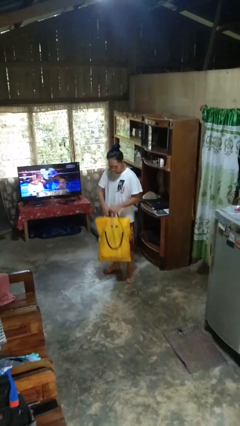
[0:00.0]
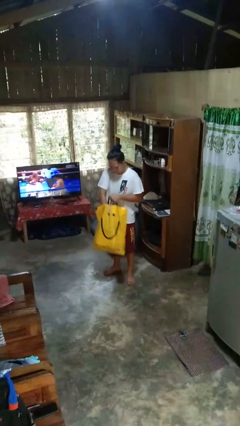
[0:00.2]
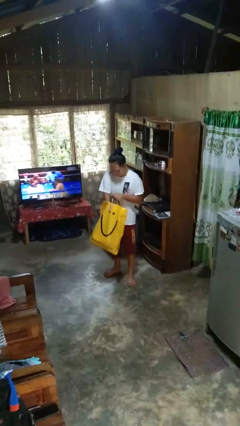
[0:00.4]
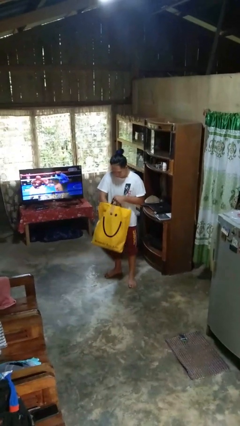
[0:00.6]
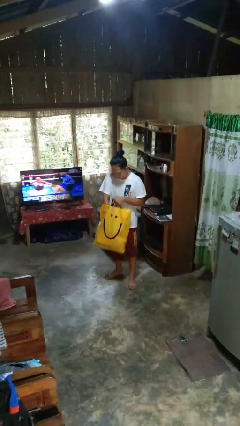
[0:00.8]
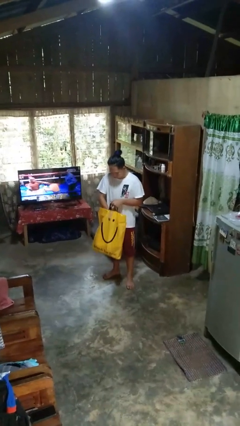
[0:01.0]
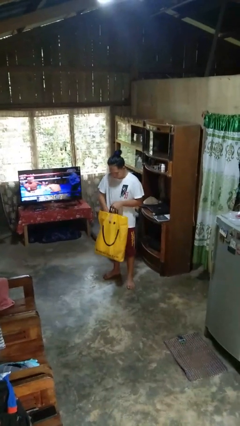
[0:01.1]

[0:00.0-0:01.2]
person searches in bag

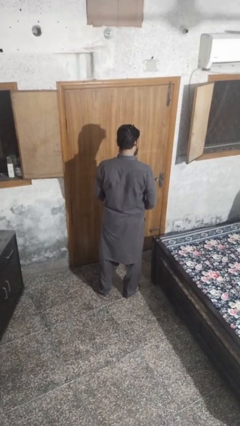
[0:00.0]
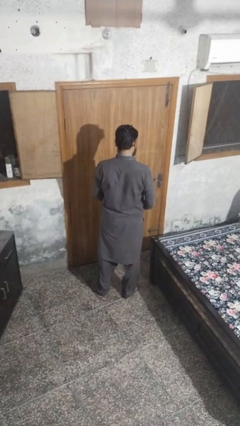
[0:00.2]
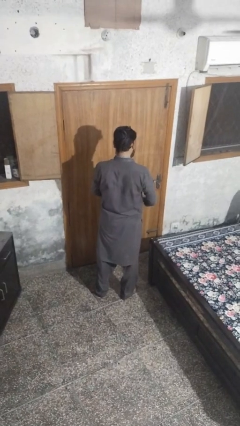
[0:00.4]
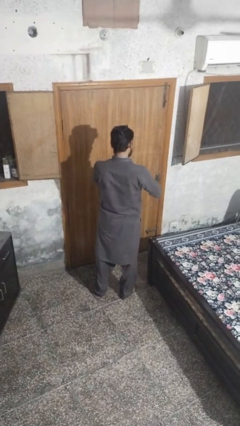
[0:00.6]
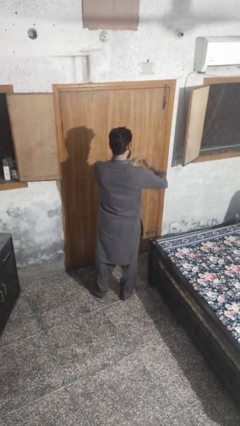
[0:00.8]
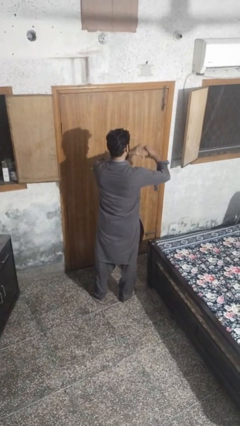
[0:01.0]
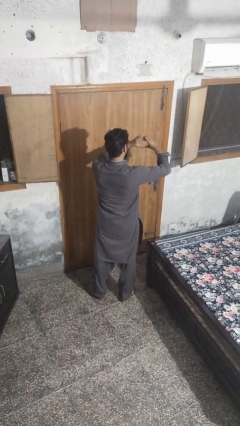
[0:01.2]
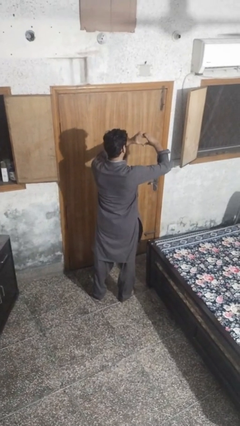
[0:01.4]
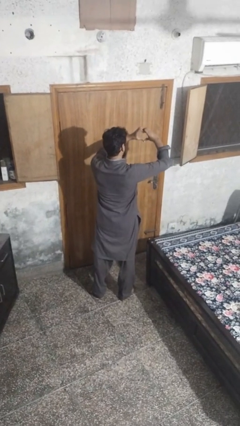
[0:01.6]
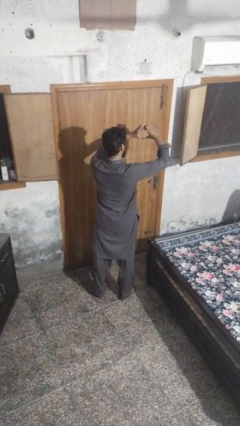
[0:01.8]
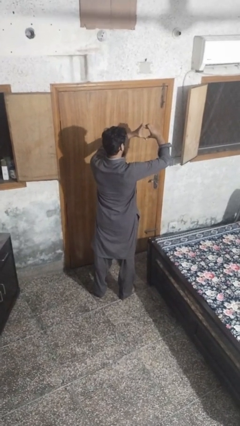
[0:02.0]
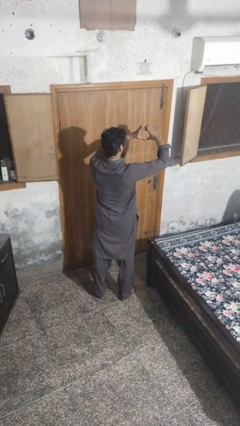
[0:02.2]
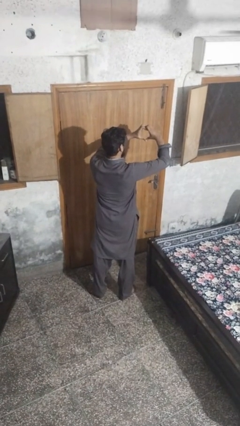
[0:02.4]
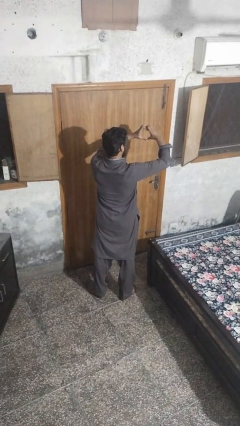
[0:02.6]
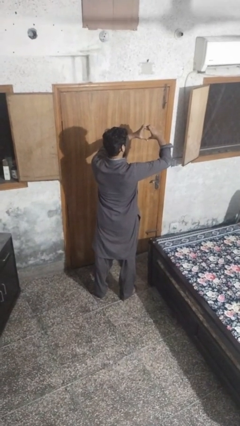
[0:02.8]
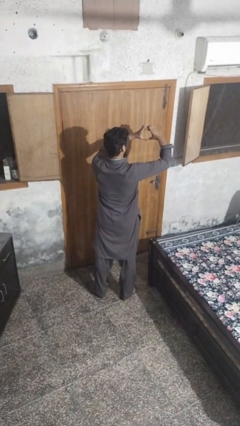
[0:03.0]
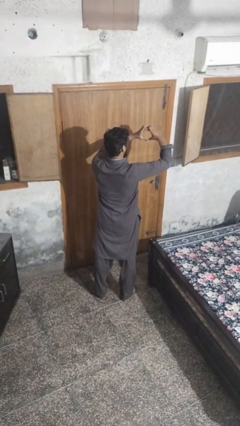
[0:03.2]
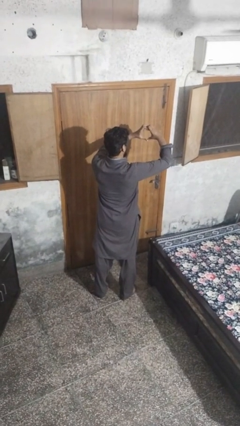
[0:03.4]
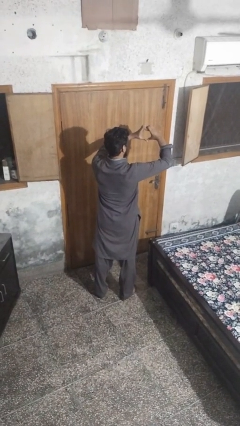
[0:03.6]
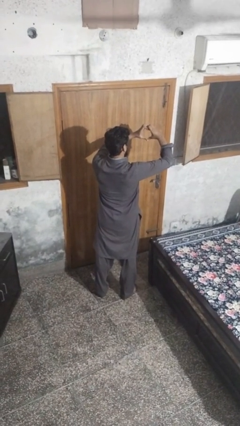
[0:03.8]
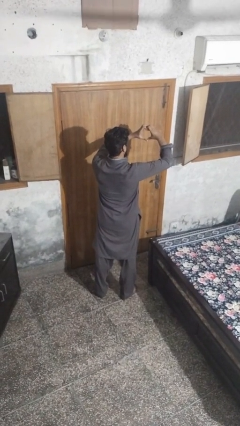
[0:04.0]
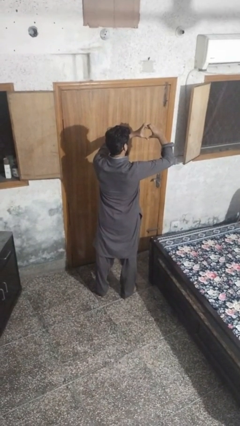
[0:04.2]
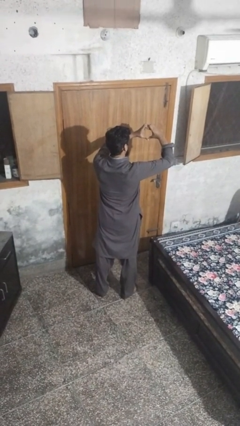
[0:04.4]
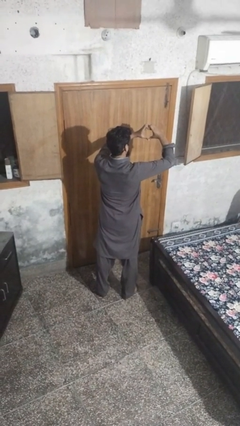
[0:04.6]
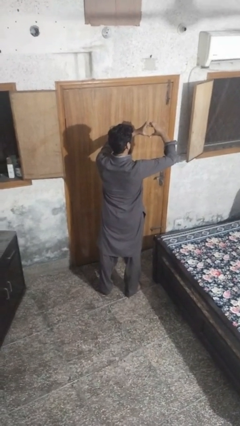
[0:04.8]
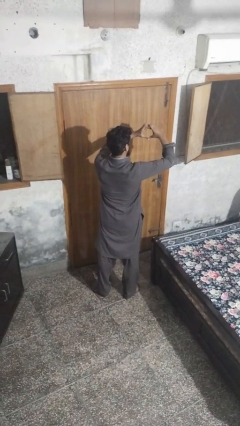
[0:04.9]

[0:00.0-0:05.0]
person gestures heart

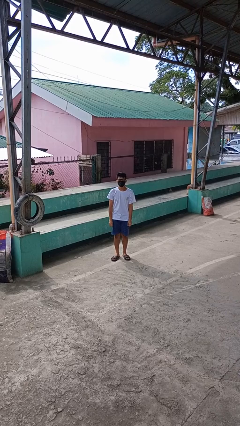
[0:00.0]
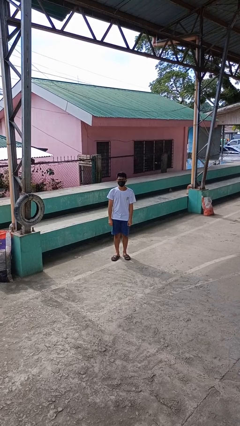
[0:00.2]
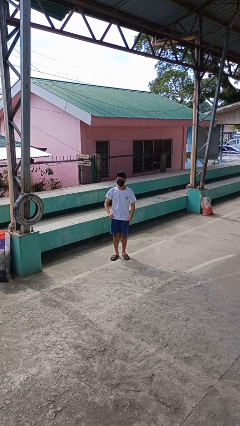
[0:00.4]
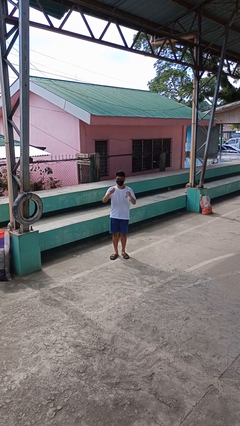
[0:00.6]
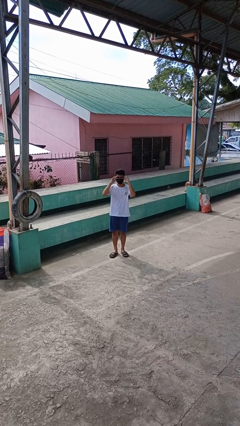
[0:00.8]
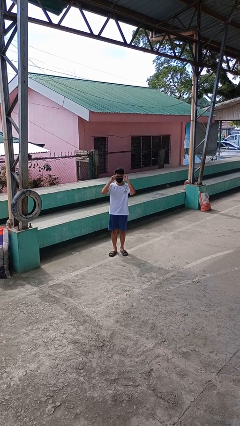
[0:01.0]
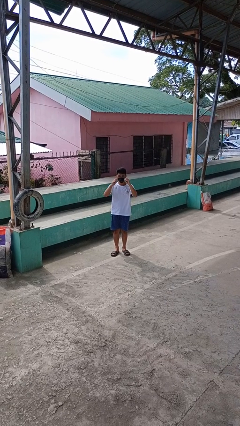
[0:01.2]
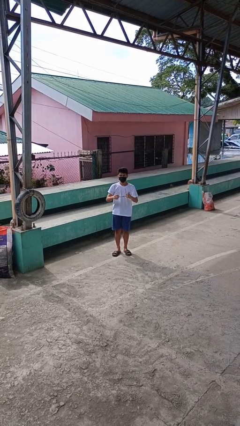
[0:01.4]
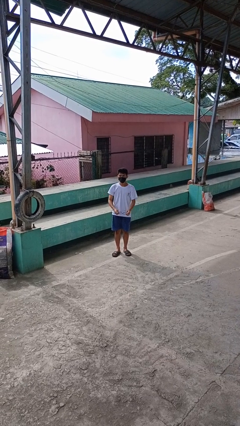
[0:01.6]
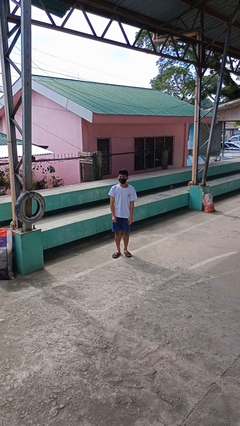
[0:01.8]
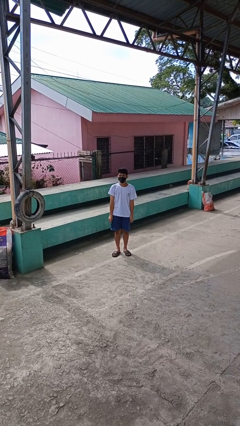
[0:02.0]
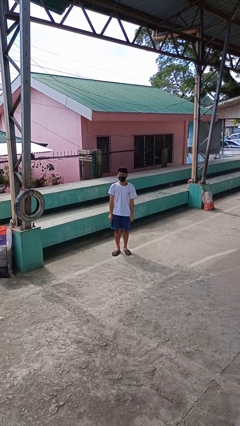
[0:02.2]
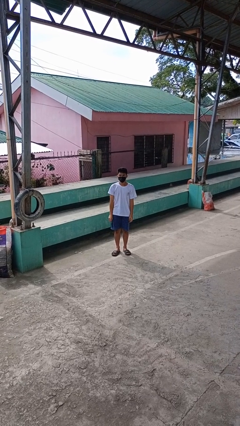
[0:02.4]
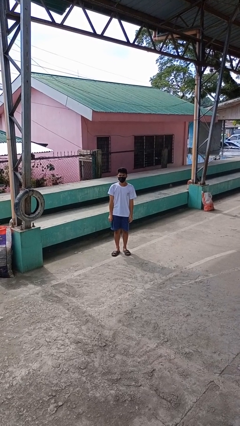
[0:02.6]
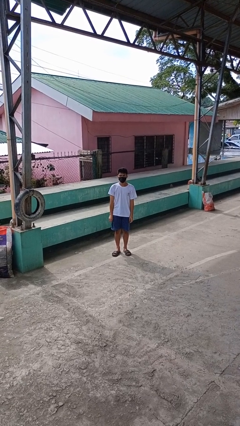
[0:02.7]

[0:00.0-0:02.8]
person takes off glasses

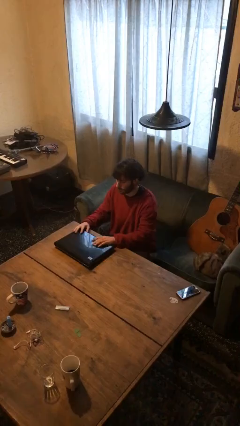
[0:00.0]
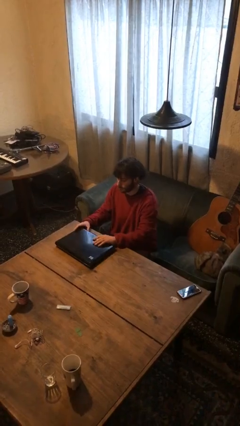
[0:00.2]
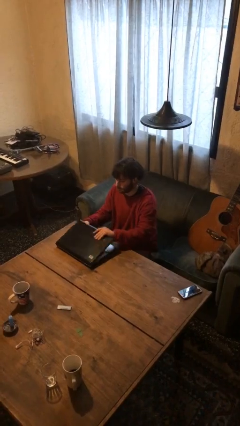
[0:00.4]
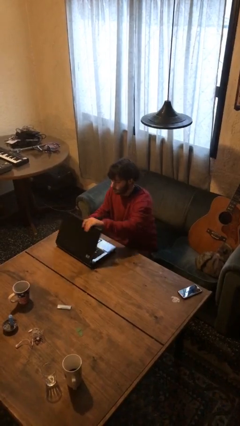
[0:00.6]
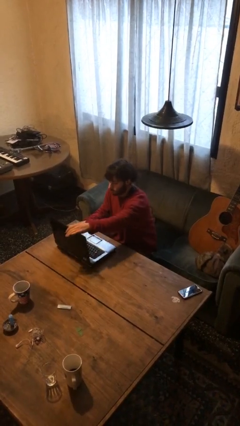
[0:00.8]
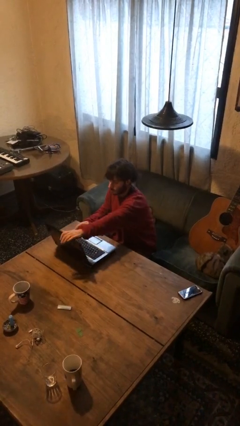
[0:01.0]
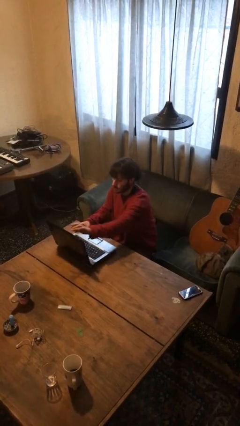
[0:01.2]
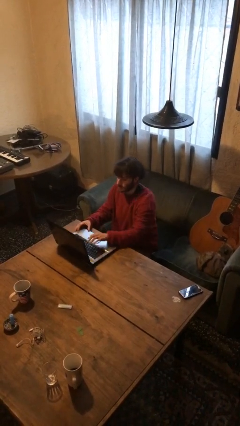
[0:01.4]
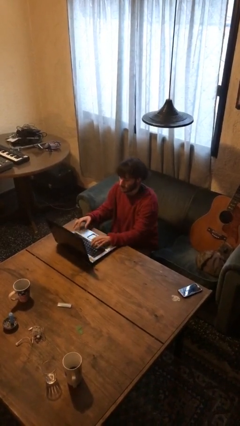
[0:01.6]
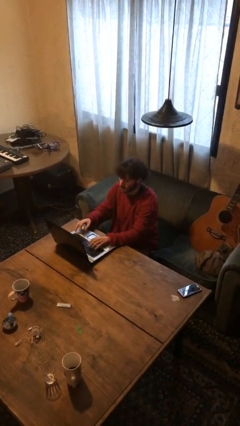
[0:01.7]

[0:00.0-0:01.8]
person opens laptop

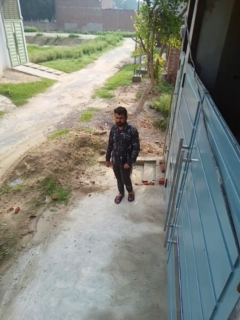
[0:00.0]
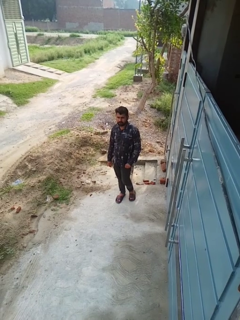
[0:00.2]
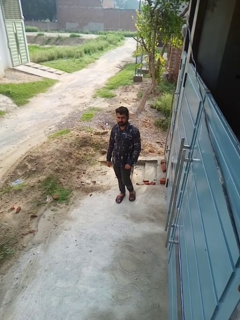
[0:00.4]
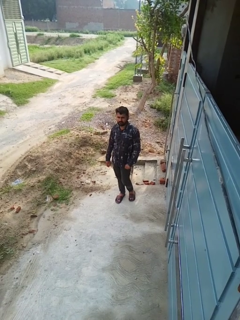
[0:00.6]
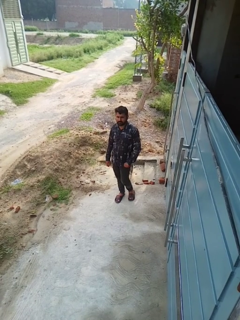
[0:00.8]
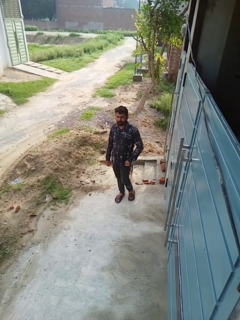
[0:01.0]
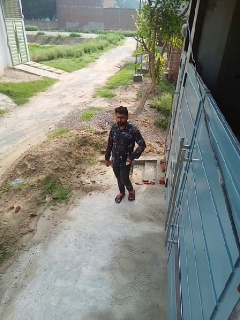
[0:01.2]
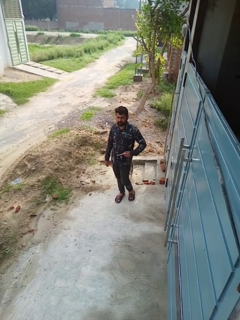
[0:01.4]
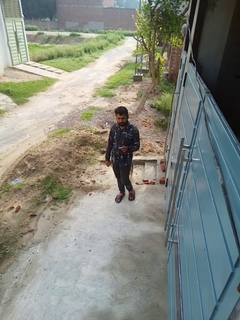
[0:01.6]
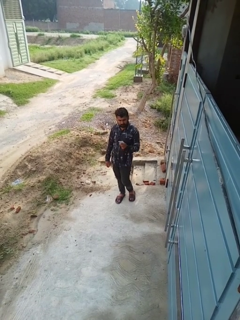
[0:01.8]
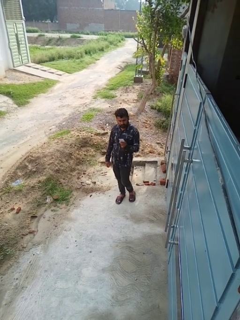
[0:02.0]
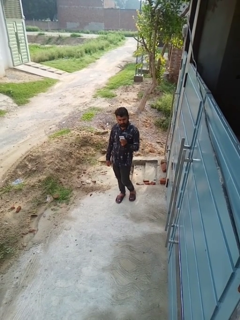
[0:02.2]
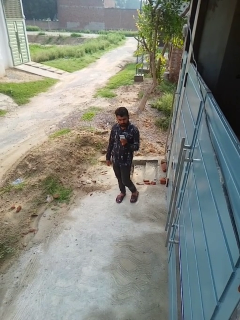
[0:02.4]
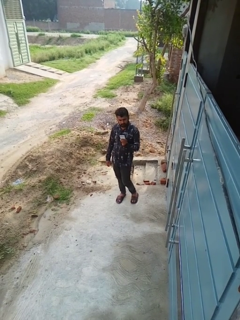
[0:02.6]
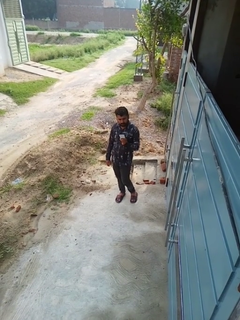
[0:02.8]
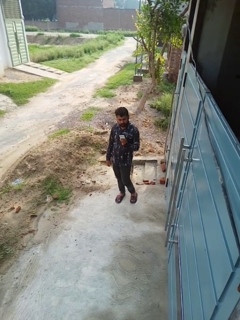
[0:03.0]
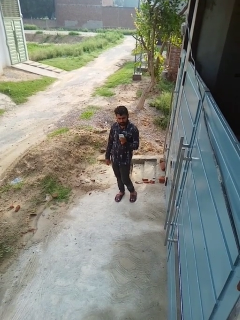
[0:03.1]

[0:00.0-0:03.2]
person takes phone from pocket

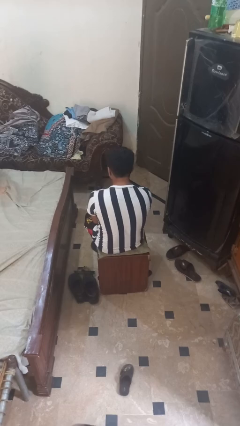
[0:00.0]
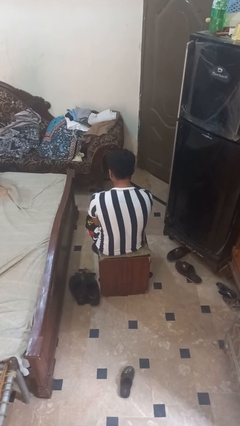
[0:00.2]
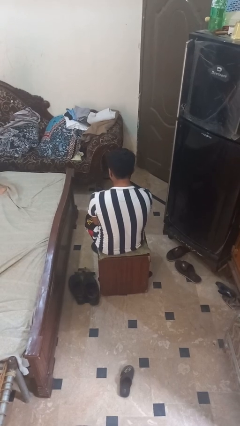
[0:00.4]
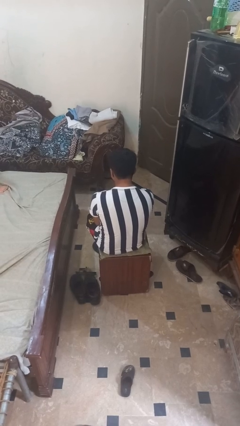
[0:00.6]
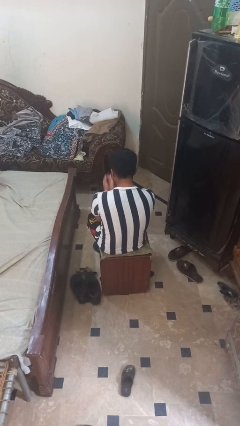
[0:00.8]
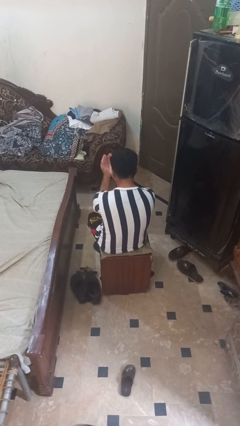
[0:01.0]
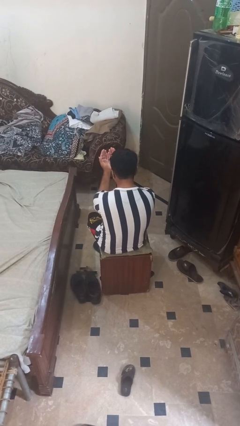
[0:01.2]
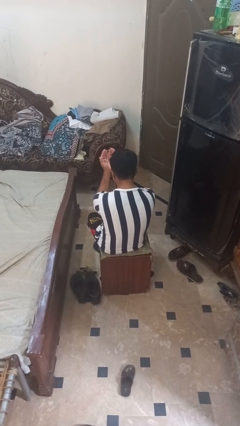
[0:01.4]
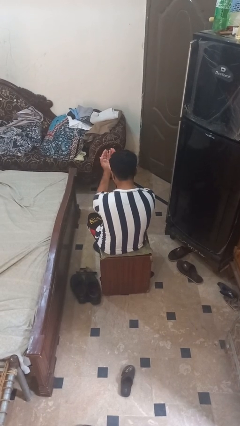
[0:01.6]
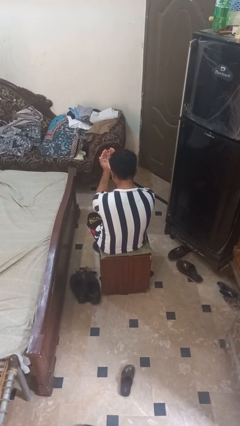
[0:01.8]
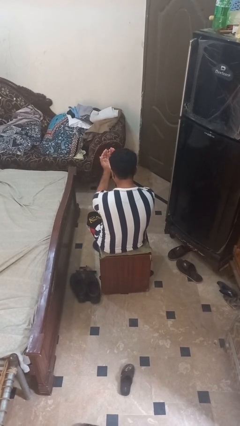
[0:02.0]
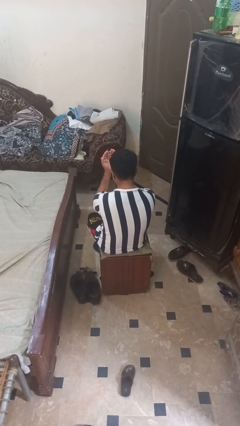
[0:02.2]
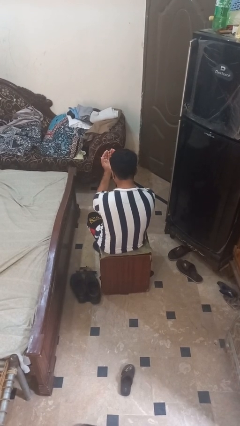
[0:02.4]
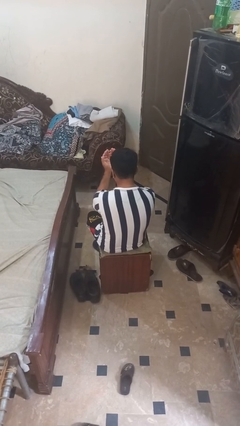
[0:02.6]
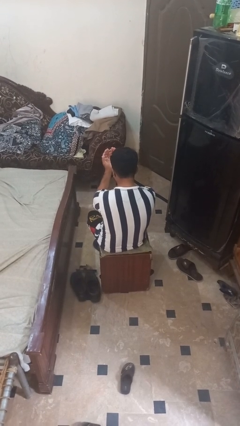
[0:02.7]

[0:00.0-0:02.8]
person prays

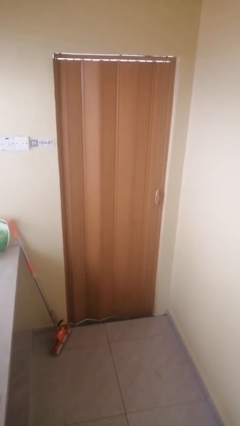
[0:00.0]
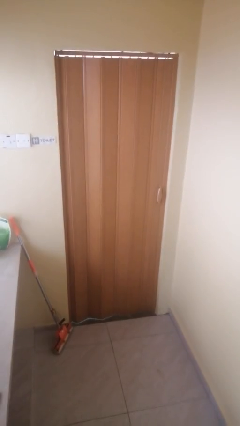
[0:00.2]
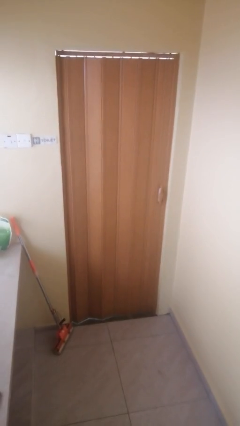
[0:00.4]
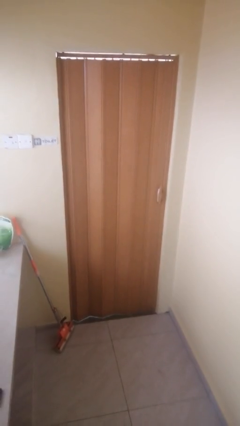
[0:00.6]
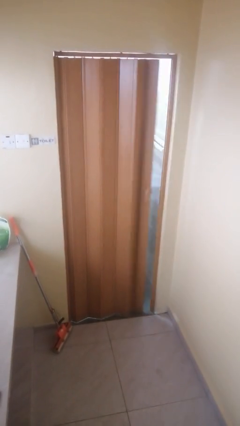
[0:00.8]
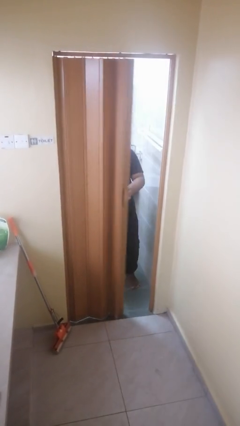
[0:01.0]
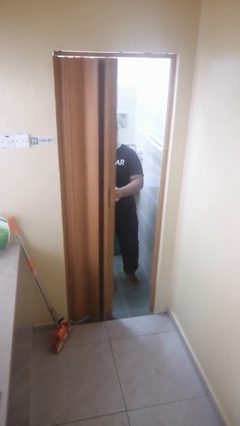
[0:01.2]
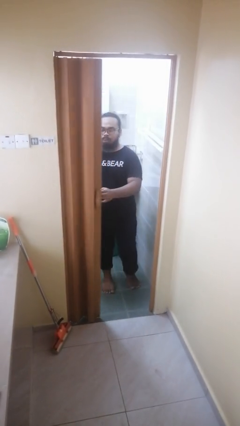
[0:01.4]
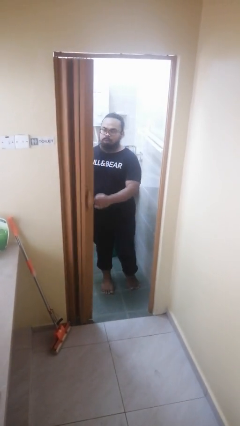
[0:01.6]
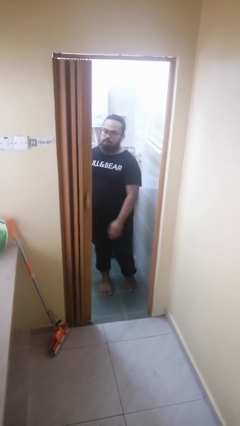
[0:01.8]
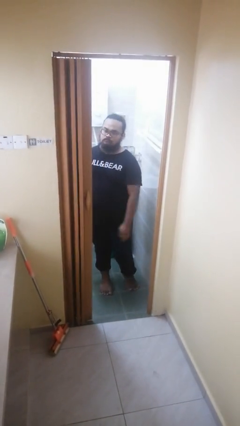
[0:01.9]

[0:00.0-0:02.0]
person opens sliding door
